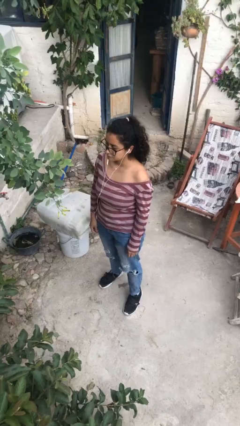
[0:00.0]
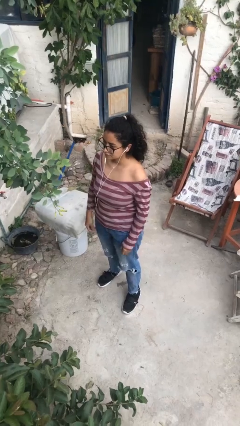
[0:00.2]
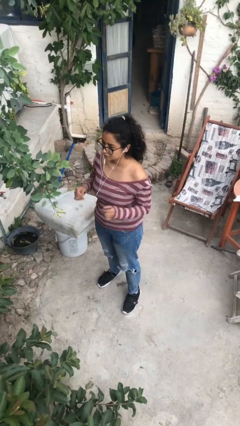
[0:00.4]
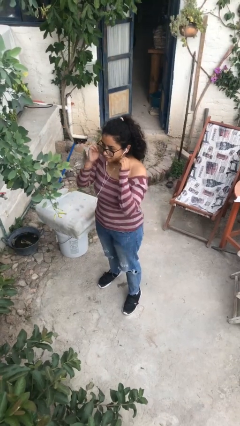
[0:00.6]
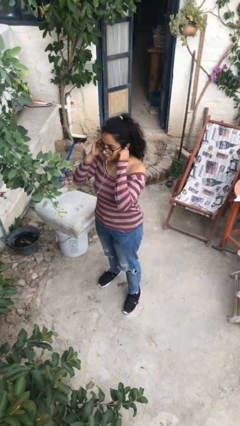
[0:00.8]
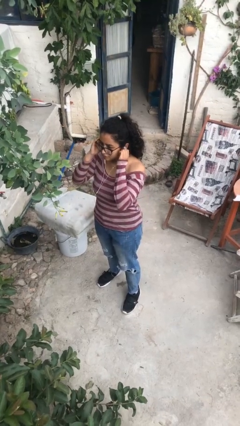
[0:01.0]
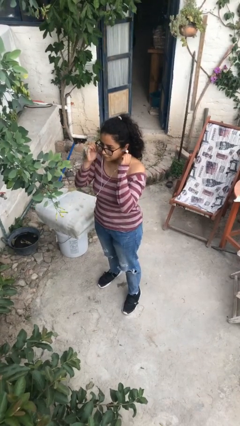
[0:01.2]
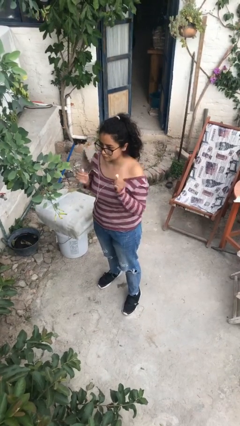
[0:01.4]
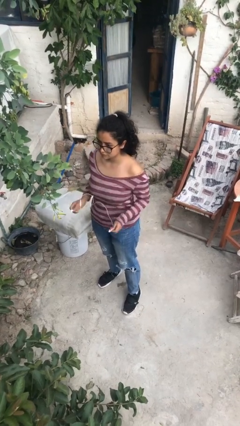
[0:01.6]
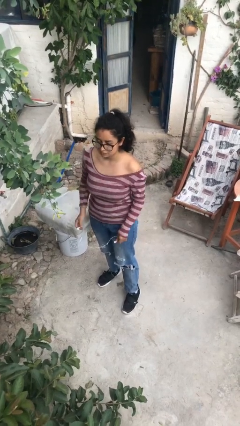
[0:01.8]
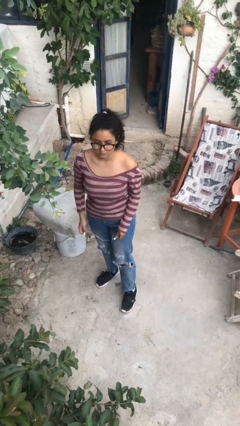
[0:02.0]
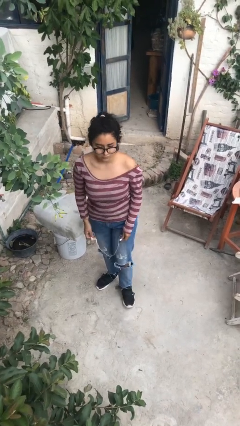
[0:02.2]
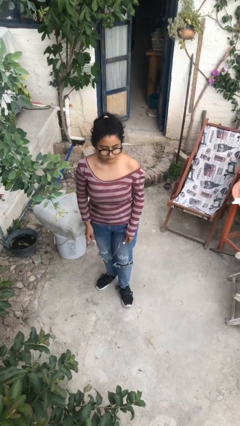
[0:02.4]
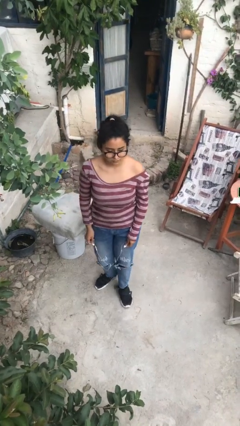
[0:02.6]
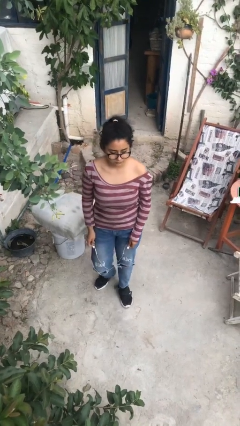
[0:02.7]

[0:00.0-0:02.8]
person takes off headphones

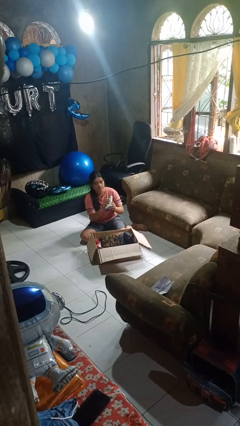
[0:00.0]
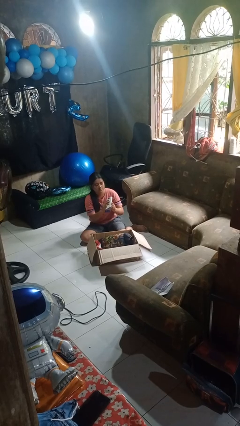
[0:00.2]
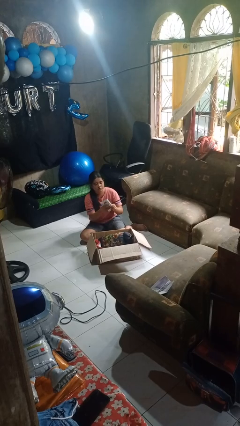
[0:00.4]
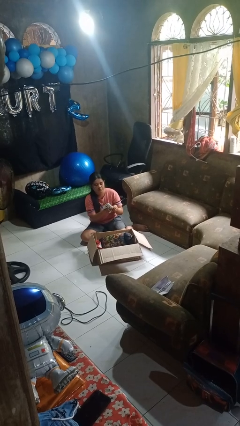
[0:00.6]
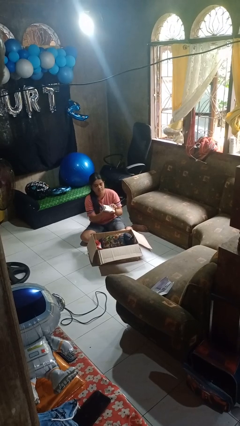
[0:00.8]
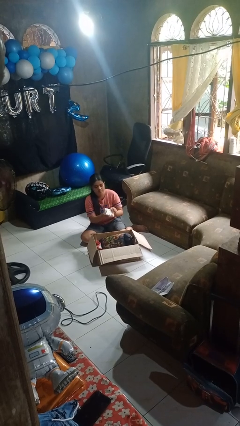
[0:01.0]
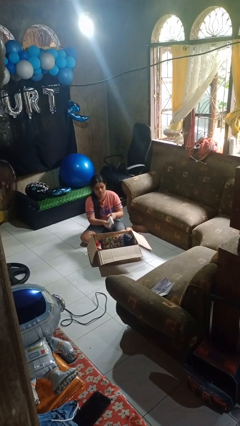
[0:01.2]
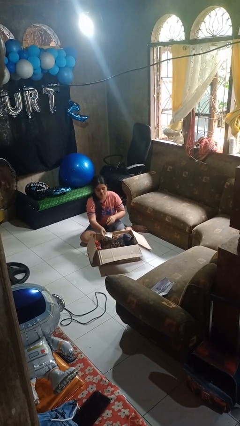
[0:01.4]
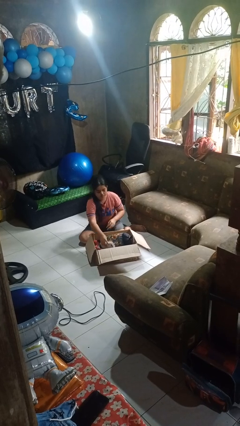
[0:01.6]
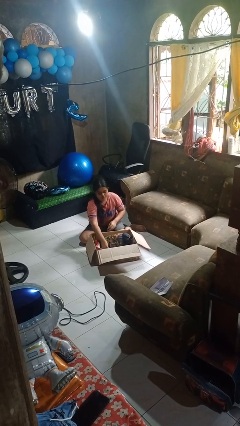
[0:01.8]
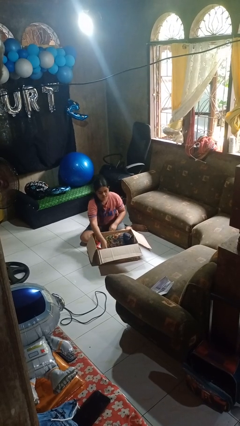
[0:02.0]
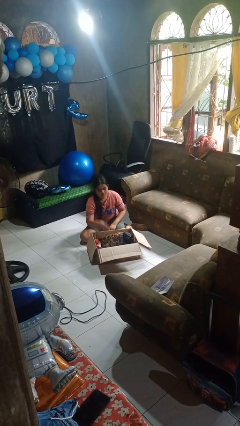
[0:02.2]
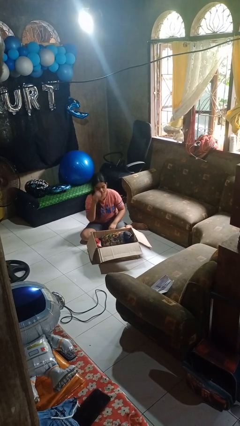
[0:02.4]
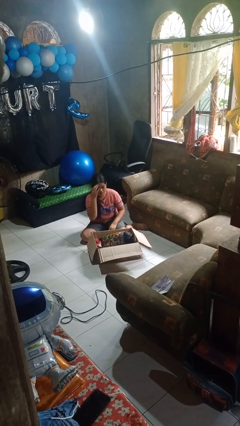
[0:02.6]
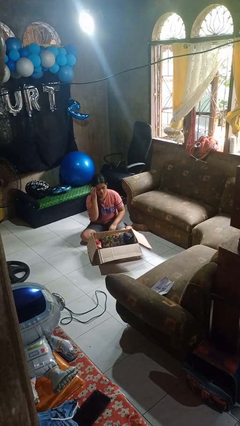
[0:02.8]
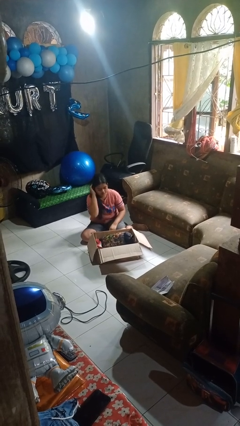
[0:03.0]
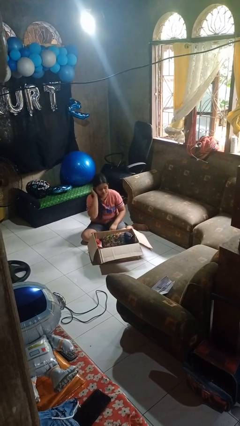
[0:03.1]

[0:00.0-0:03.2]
person puts object into box

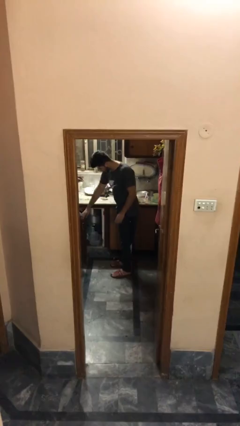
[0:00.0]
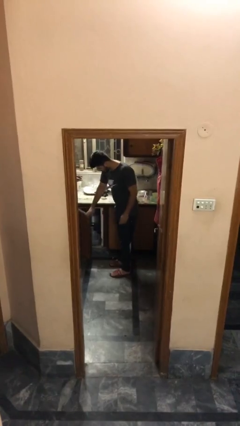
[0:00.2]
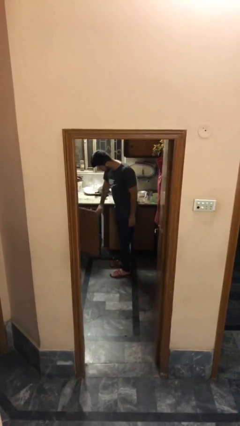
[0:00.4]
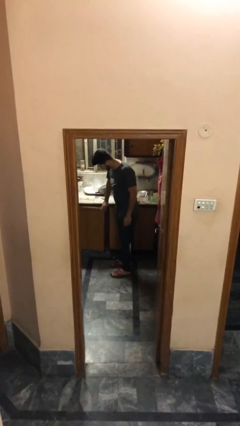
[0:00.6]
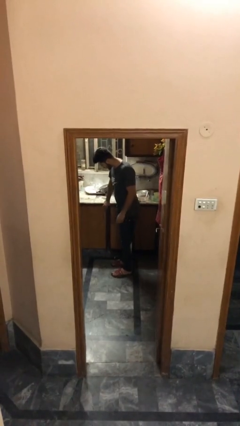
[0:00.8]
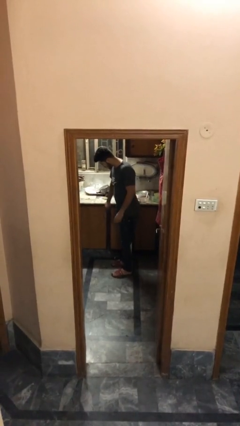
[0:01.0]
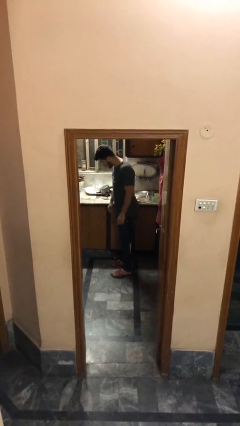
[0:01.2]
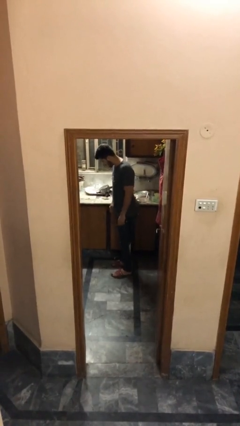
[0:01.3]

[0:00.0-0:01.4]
person closes cabinet

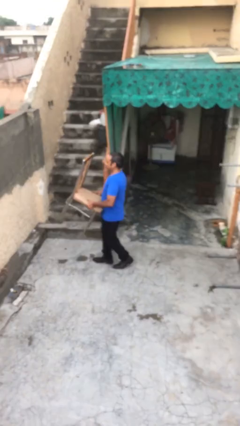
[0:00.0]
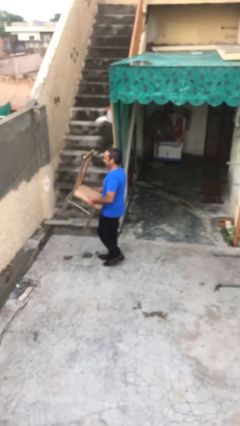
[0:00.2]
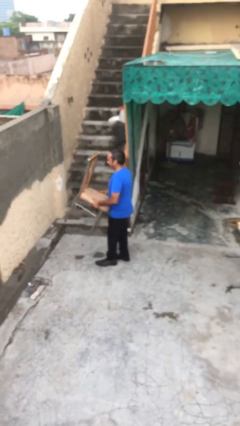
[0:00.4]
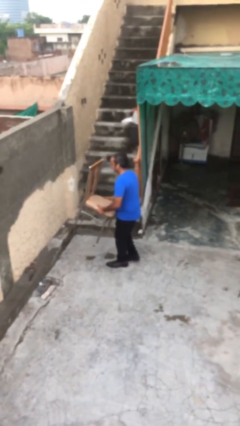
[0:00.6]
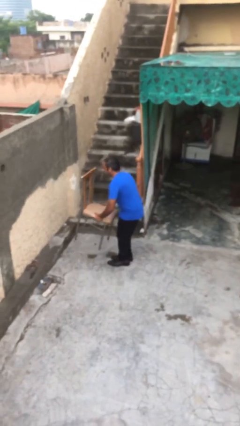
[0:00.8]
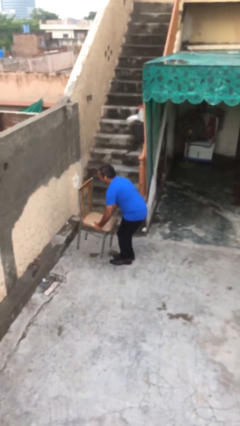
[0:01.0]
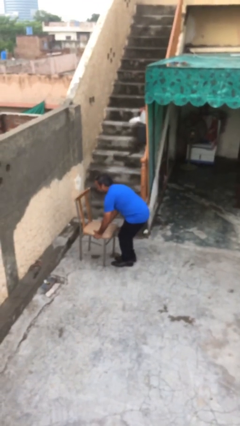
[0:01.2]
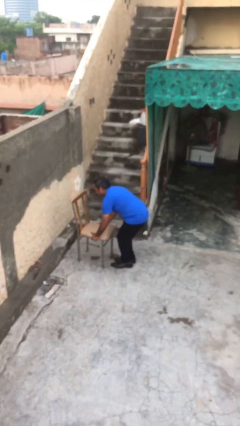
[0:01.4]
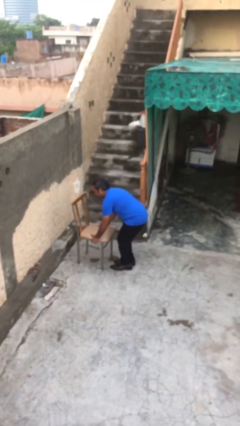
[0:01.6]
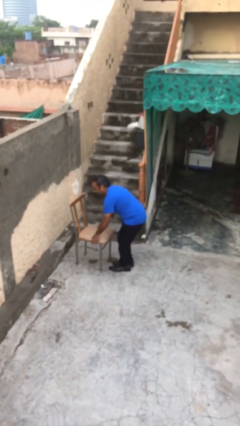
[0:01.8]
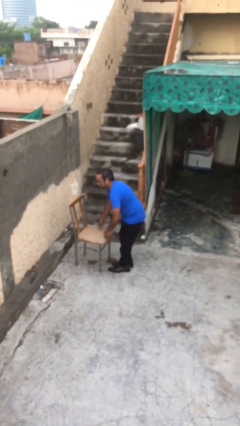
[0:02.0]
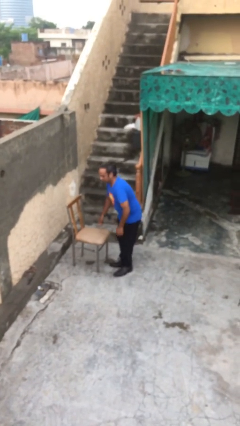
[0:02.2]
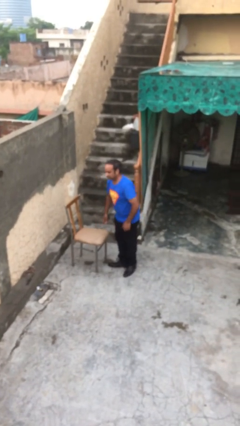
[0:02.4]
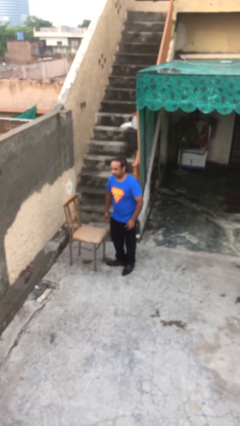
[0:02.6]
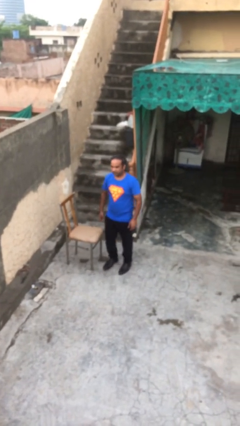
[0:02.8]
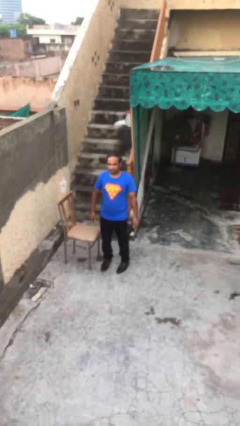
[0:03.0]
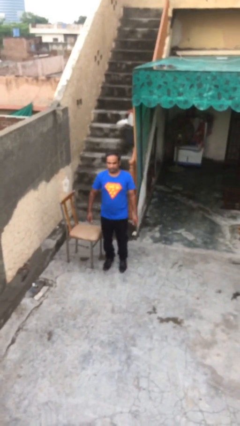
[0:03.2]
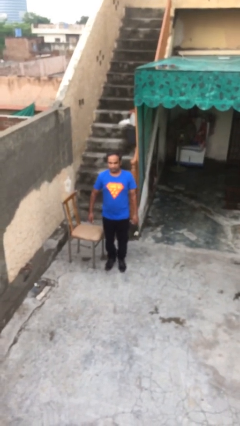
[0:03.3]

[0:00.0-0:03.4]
person puts down object on floor

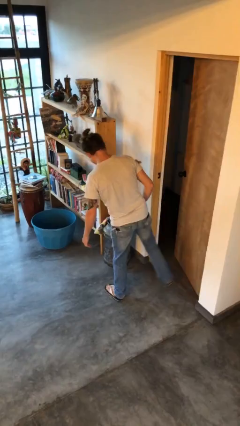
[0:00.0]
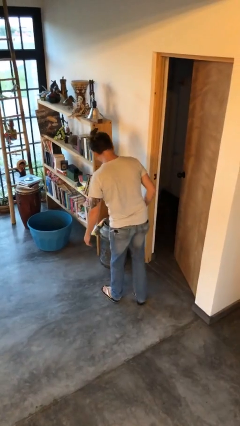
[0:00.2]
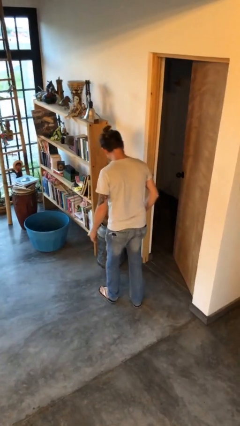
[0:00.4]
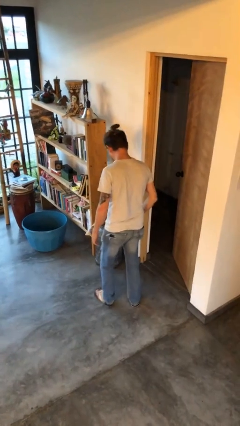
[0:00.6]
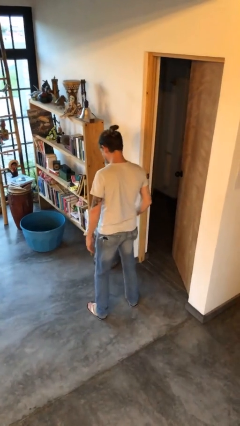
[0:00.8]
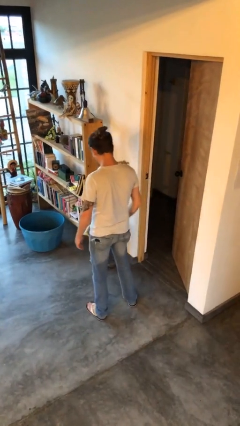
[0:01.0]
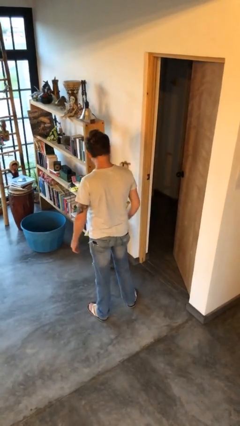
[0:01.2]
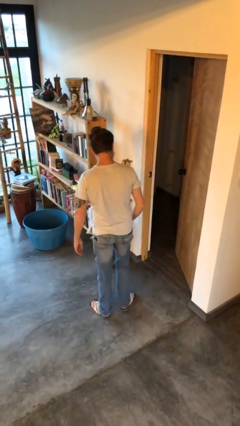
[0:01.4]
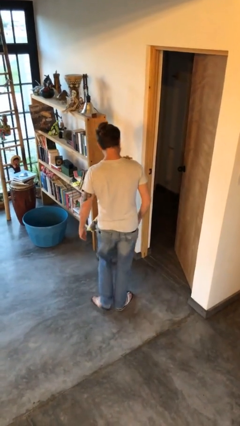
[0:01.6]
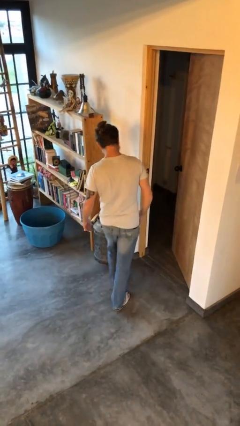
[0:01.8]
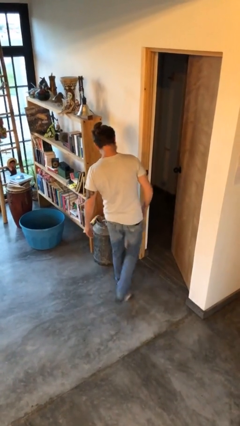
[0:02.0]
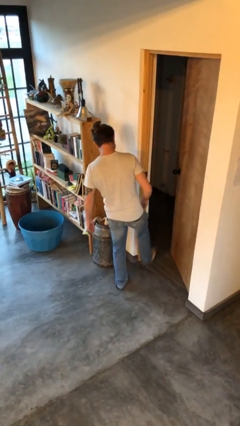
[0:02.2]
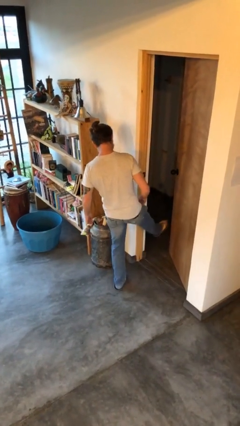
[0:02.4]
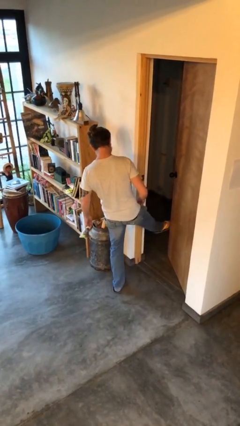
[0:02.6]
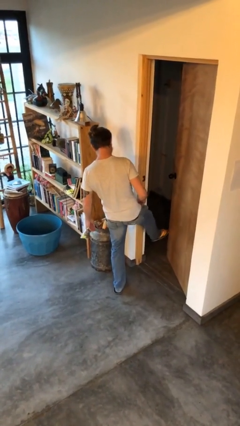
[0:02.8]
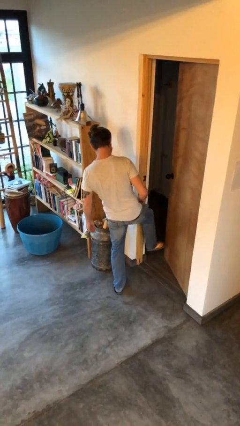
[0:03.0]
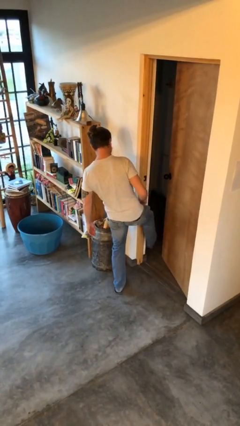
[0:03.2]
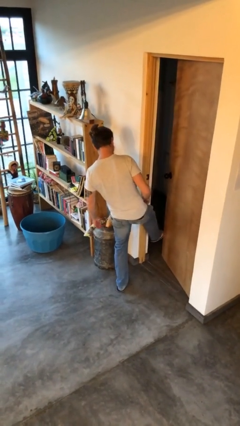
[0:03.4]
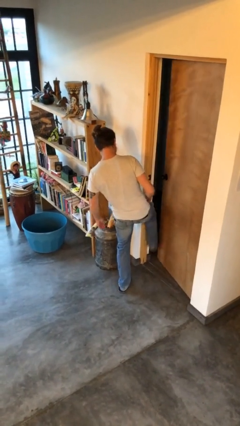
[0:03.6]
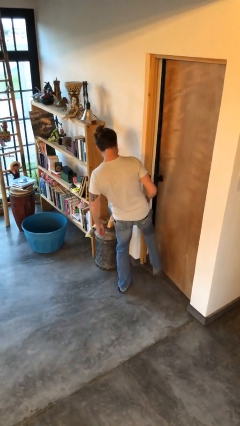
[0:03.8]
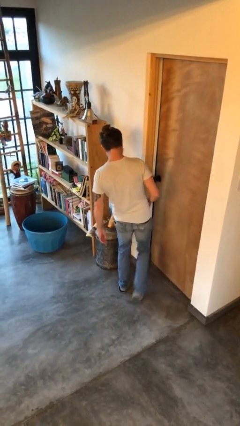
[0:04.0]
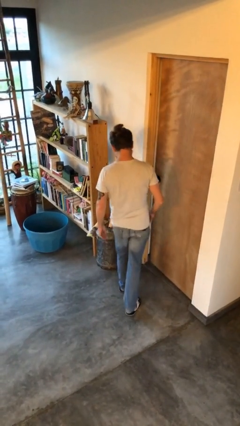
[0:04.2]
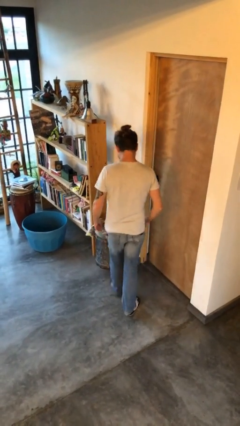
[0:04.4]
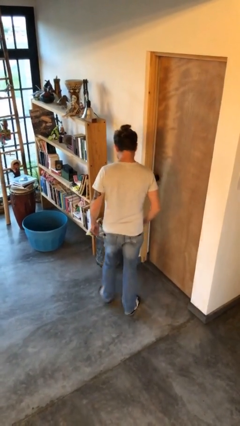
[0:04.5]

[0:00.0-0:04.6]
person closes door with foot

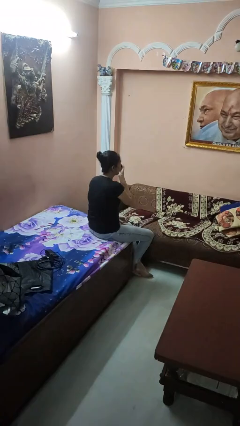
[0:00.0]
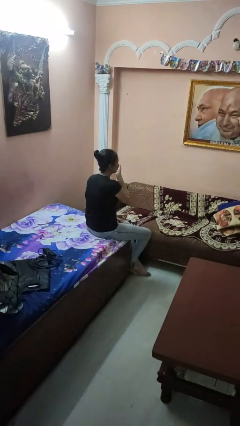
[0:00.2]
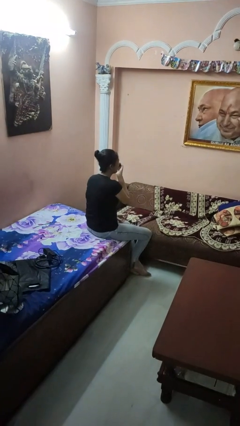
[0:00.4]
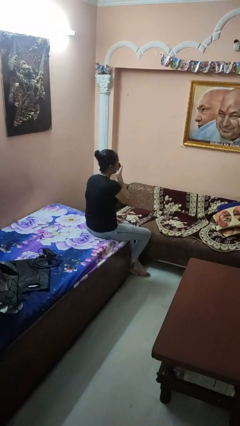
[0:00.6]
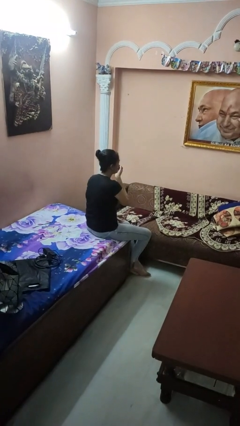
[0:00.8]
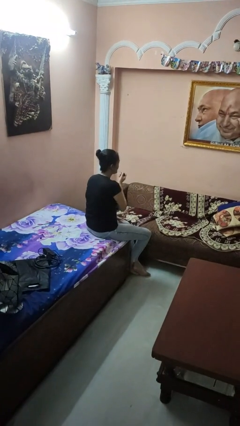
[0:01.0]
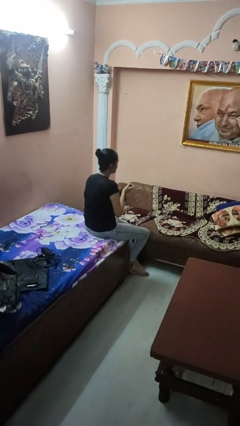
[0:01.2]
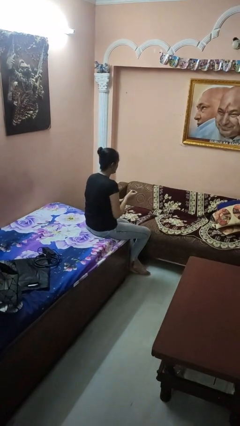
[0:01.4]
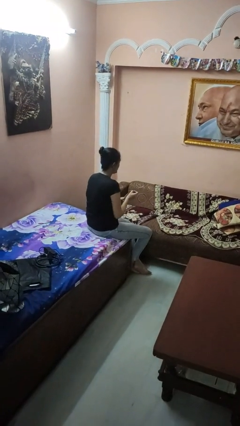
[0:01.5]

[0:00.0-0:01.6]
person applies eye makeup

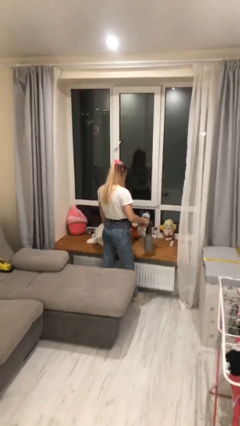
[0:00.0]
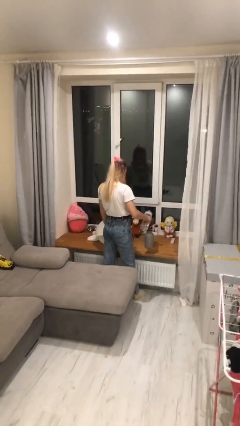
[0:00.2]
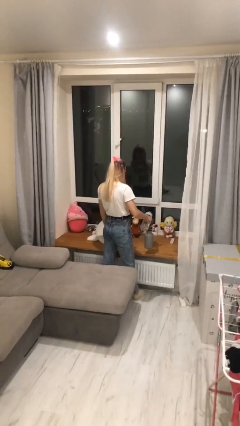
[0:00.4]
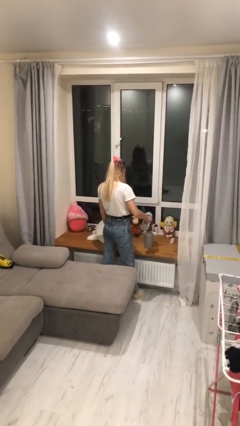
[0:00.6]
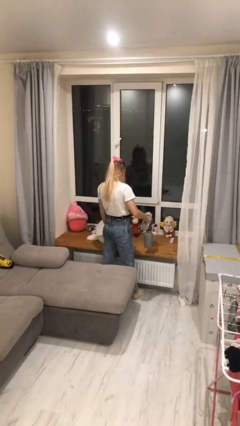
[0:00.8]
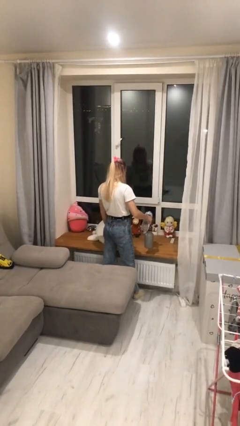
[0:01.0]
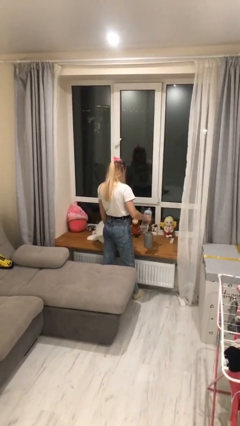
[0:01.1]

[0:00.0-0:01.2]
person waters houseplant
